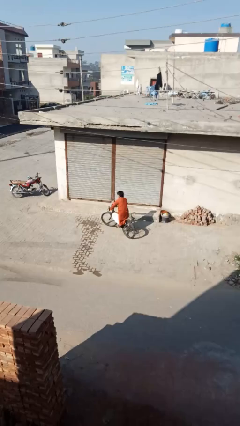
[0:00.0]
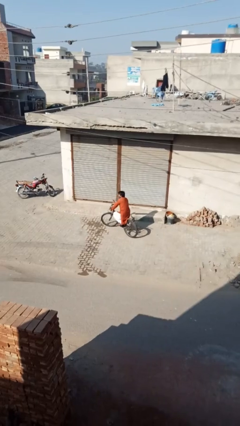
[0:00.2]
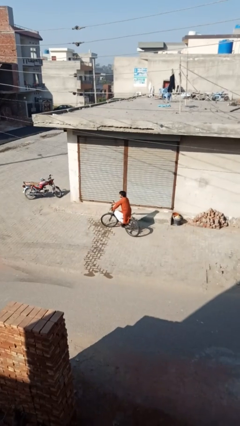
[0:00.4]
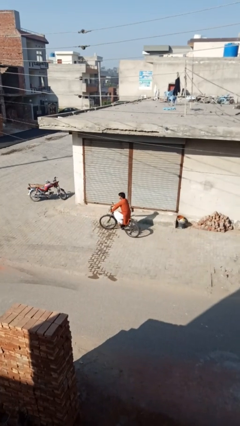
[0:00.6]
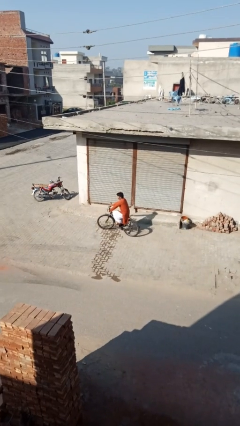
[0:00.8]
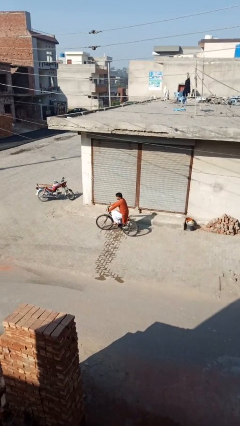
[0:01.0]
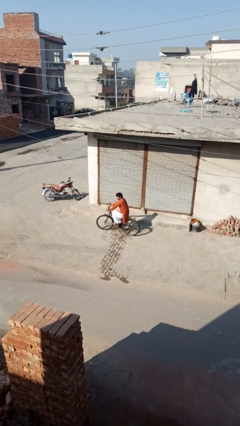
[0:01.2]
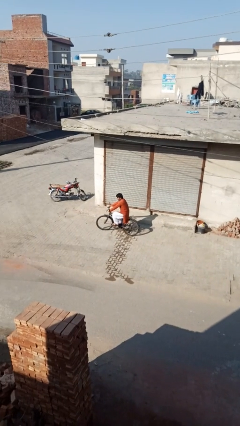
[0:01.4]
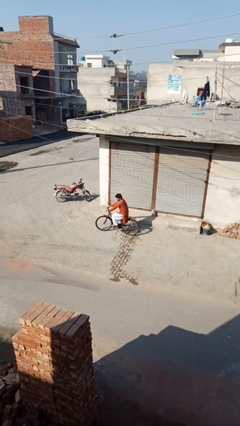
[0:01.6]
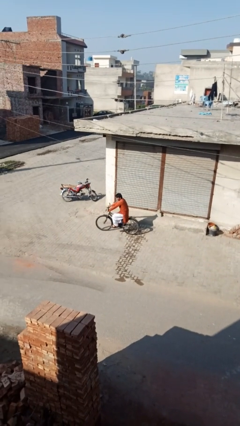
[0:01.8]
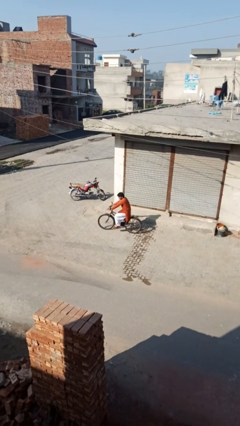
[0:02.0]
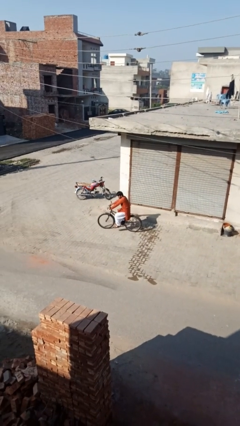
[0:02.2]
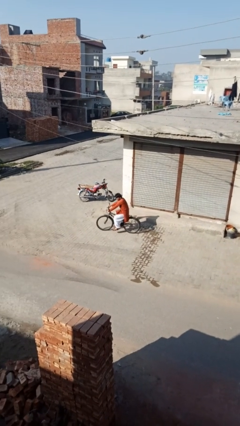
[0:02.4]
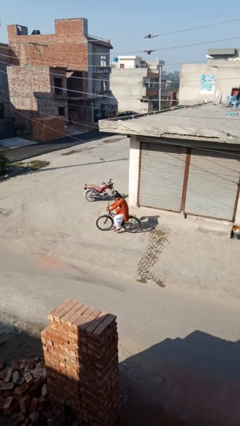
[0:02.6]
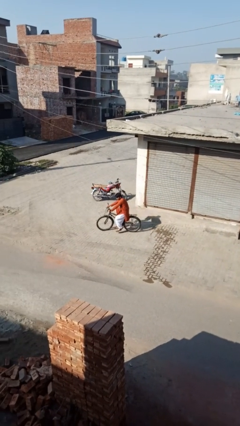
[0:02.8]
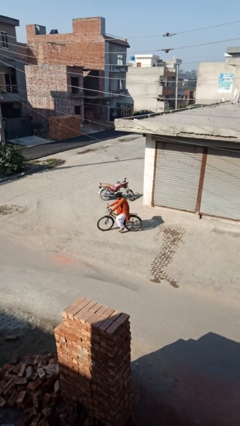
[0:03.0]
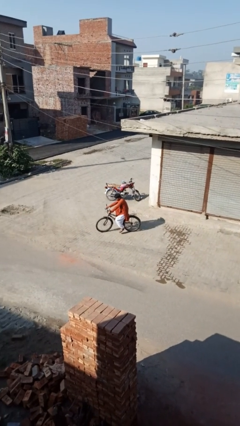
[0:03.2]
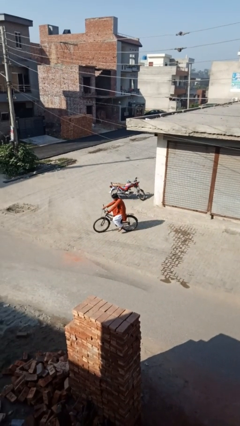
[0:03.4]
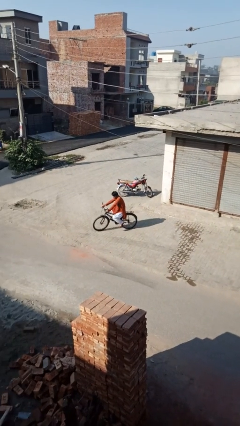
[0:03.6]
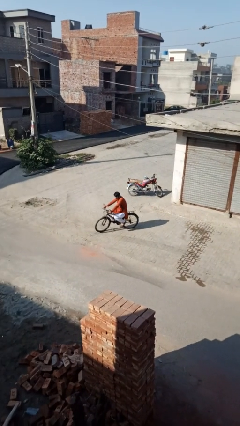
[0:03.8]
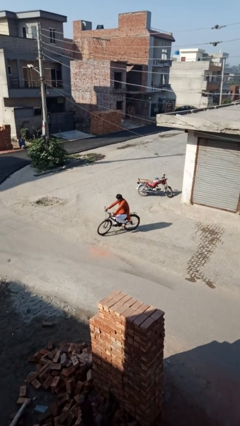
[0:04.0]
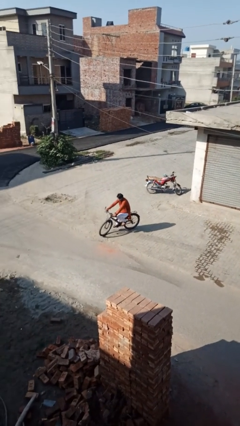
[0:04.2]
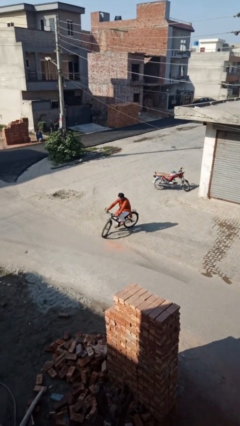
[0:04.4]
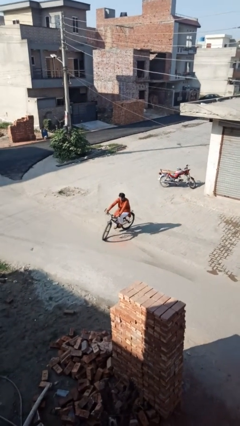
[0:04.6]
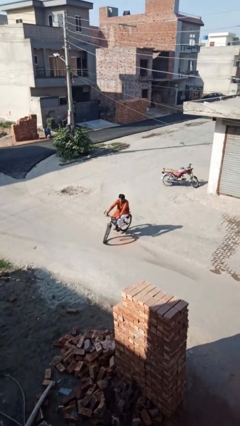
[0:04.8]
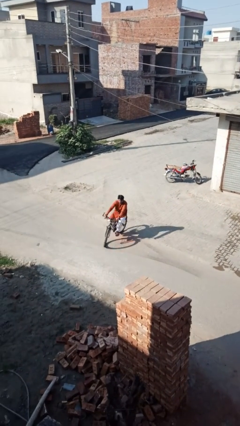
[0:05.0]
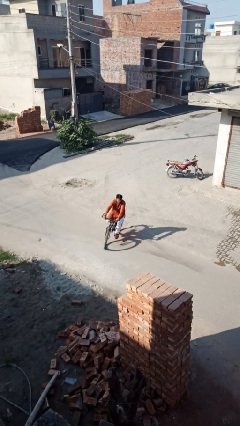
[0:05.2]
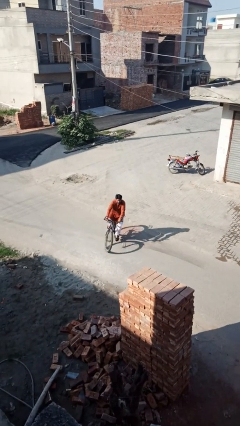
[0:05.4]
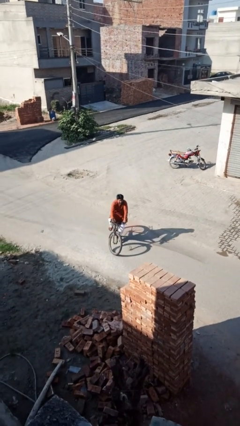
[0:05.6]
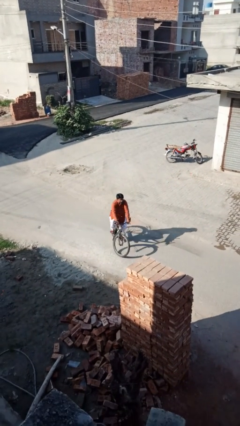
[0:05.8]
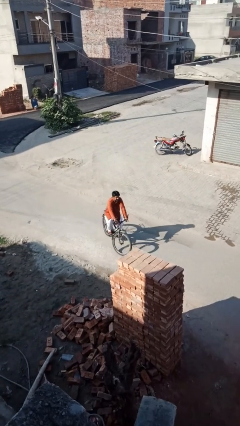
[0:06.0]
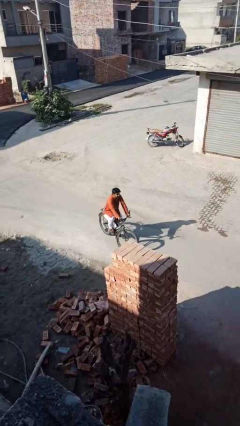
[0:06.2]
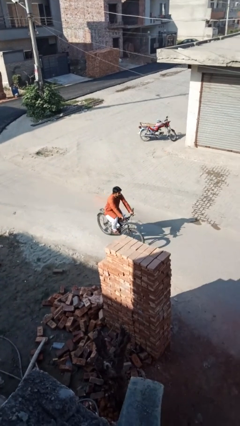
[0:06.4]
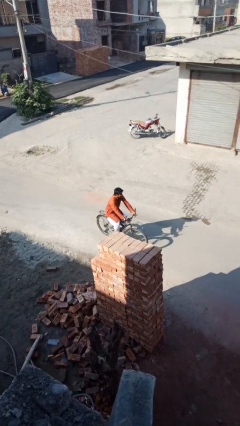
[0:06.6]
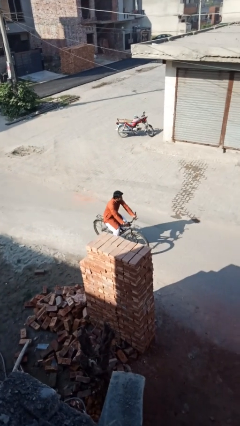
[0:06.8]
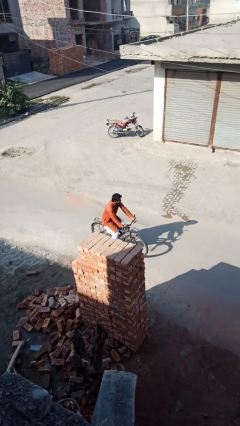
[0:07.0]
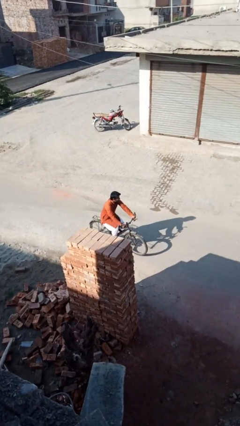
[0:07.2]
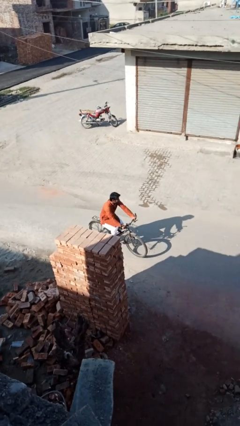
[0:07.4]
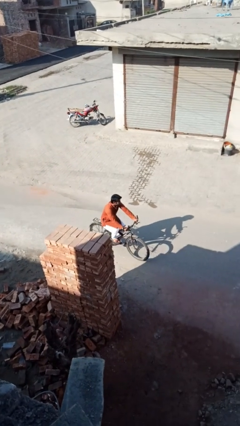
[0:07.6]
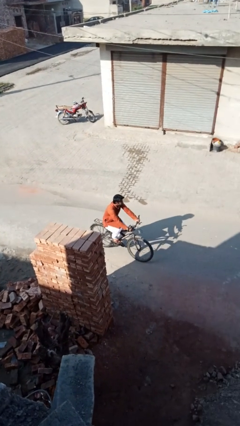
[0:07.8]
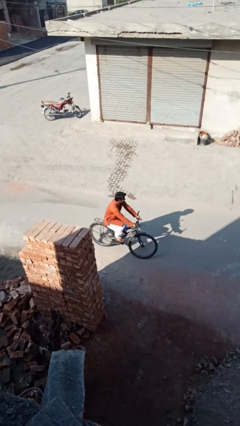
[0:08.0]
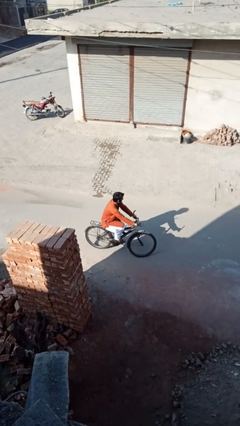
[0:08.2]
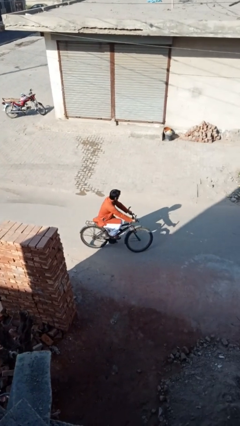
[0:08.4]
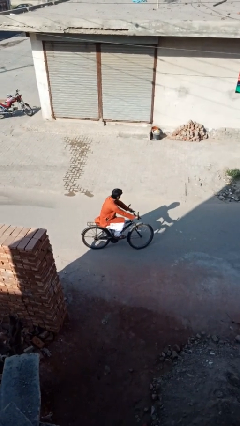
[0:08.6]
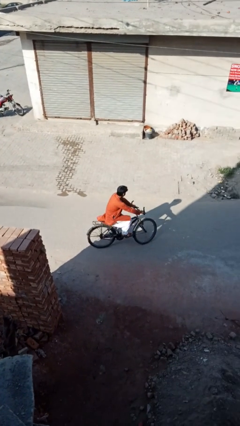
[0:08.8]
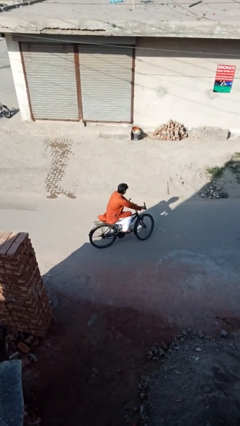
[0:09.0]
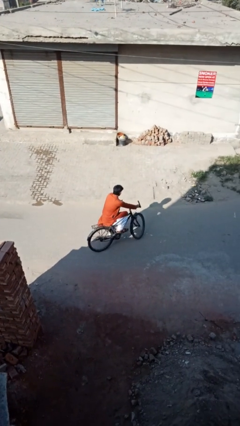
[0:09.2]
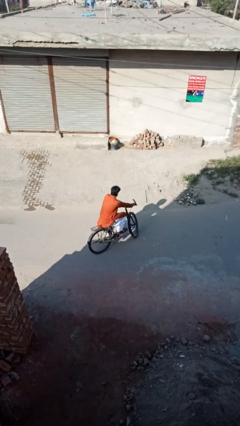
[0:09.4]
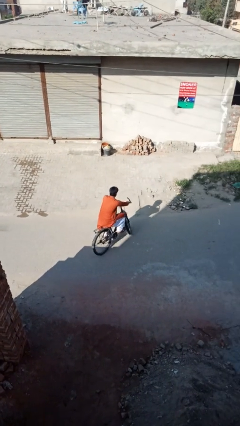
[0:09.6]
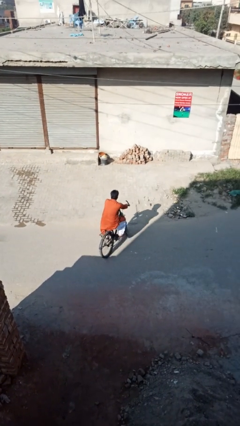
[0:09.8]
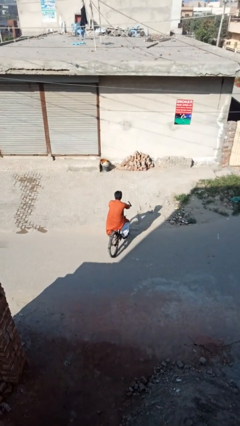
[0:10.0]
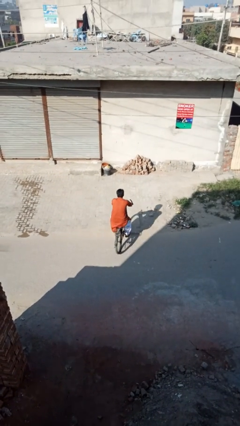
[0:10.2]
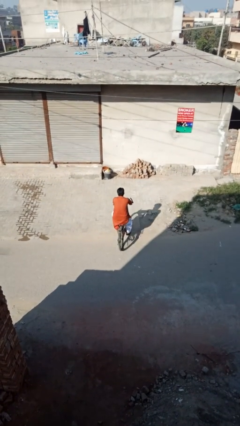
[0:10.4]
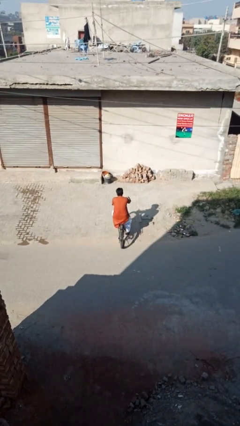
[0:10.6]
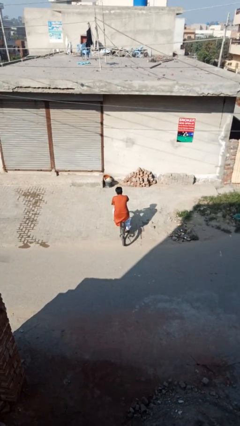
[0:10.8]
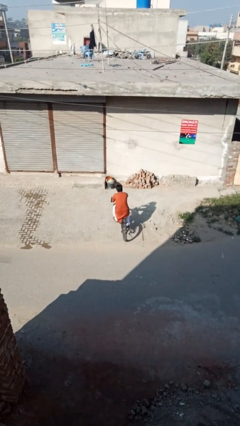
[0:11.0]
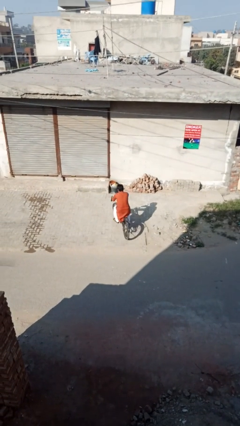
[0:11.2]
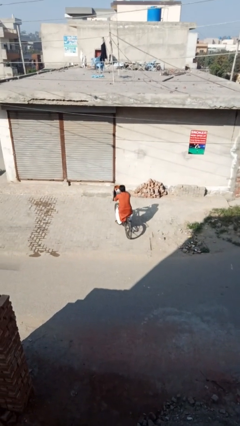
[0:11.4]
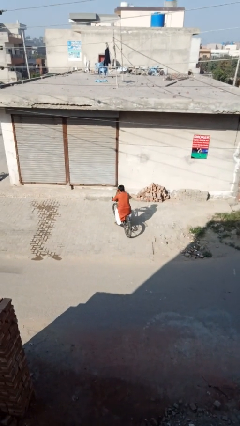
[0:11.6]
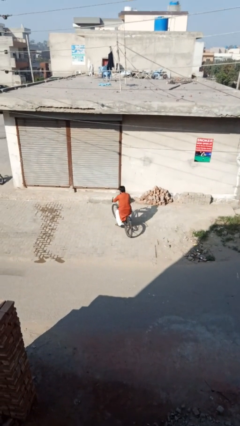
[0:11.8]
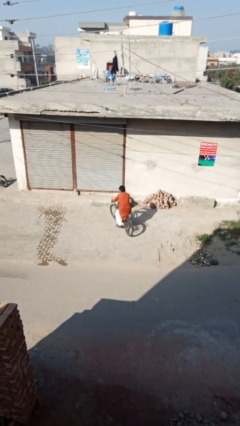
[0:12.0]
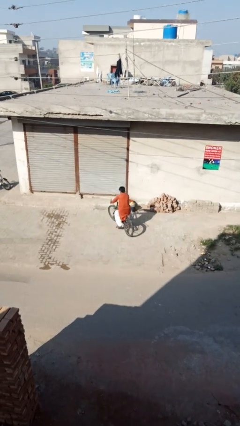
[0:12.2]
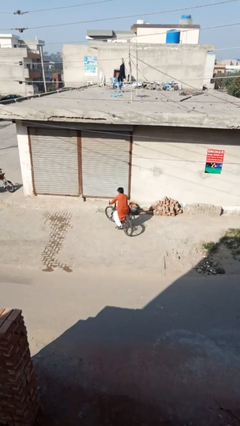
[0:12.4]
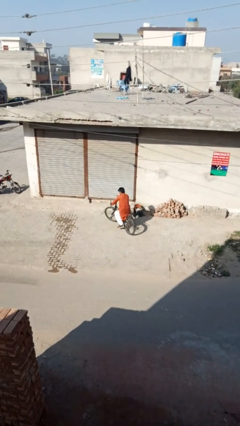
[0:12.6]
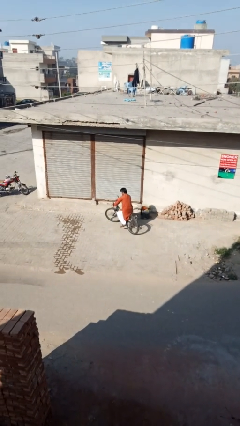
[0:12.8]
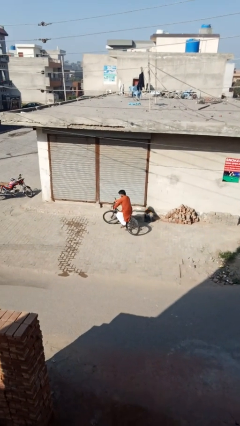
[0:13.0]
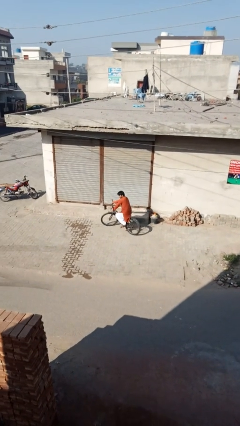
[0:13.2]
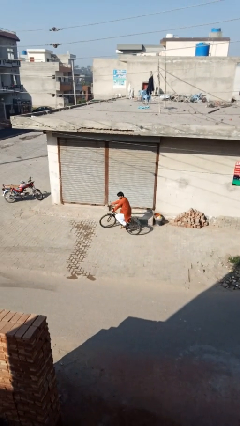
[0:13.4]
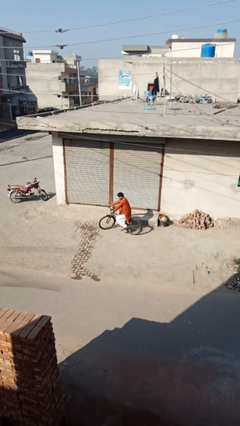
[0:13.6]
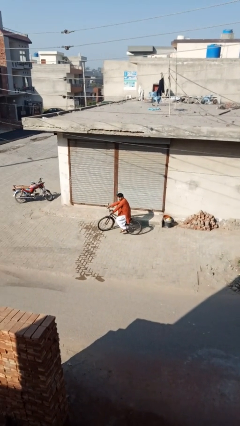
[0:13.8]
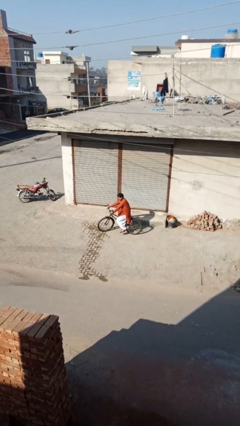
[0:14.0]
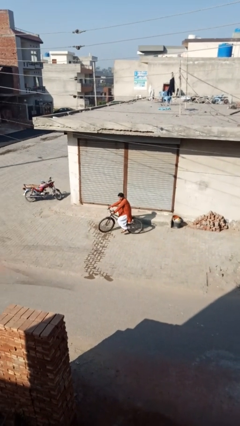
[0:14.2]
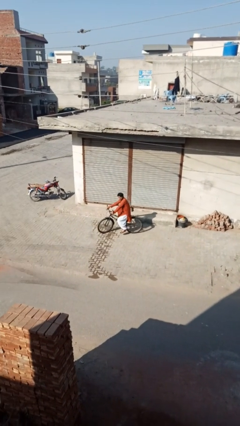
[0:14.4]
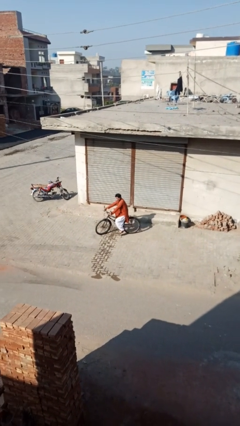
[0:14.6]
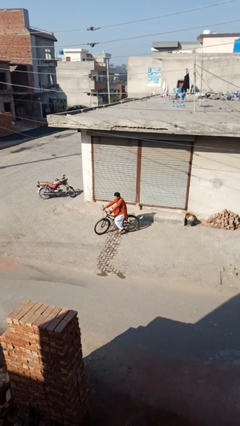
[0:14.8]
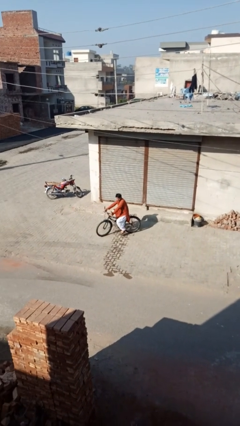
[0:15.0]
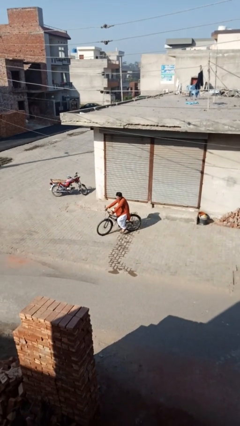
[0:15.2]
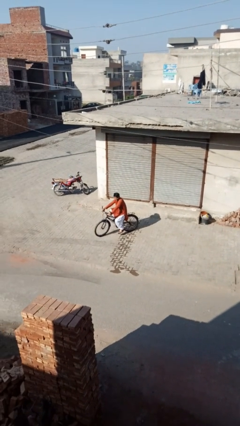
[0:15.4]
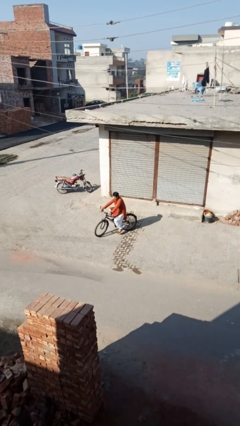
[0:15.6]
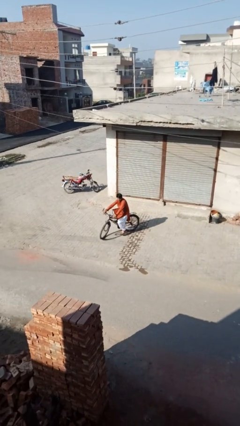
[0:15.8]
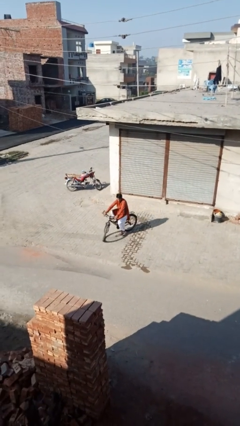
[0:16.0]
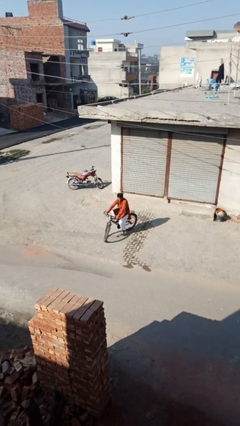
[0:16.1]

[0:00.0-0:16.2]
person rides bicycle

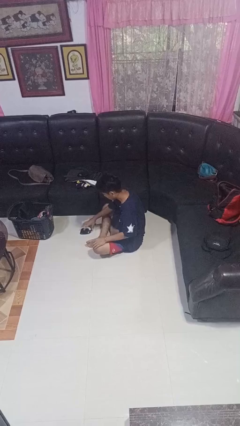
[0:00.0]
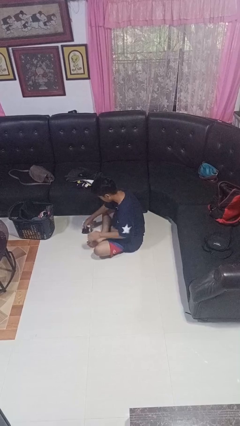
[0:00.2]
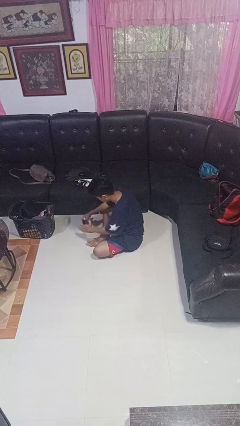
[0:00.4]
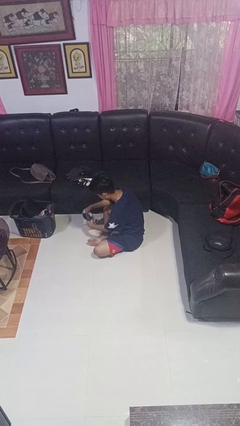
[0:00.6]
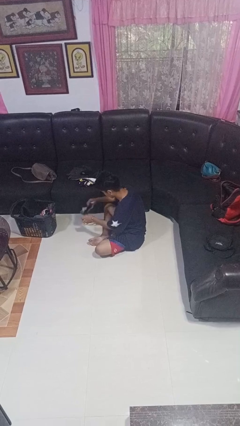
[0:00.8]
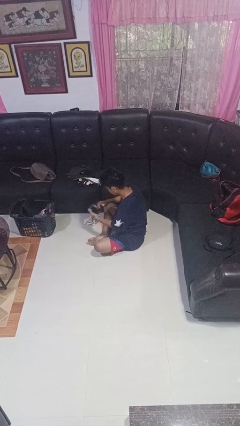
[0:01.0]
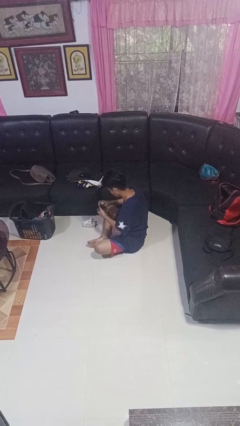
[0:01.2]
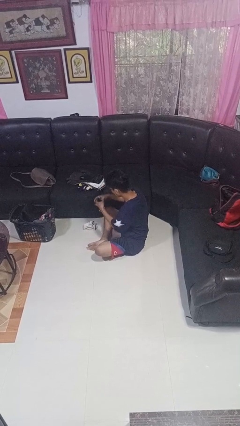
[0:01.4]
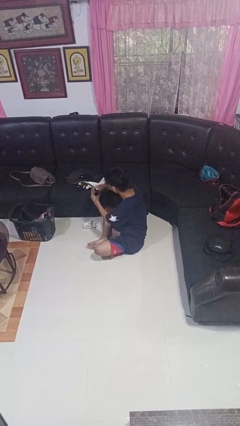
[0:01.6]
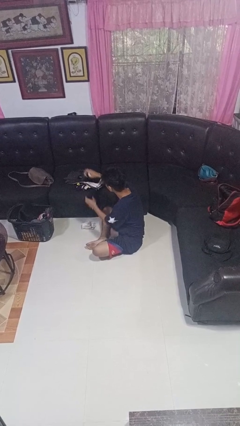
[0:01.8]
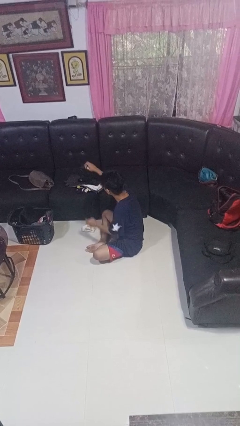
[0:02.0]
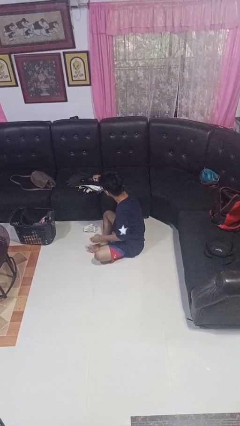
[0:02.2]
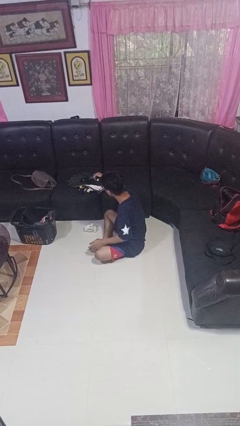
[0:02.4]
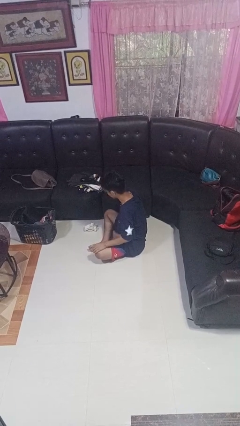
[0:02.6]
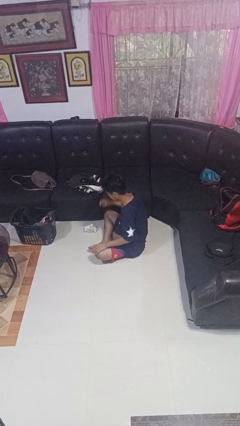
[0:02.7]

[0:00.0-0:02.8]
person folds socks
